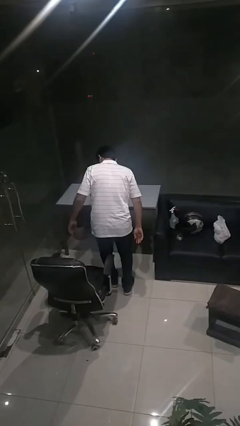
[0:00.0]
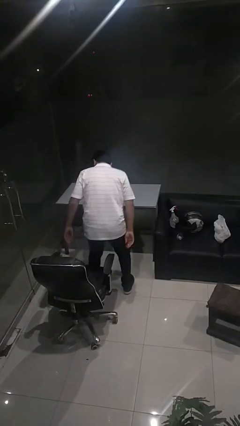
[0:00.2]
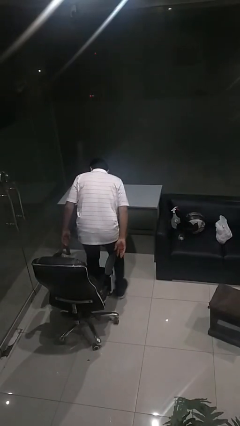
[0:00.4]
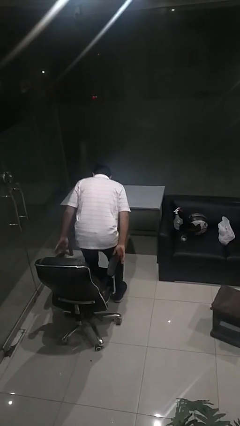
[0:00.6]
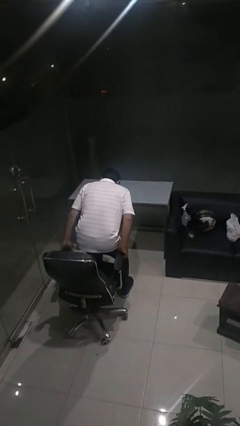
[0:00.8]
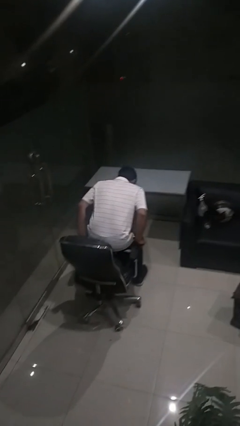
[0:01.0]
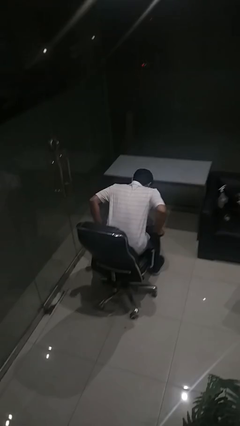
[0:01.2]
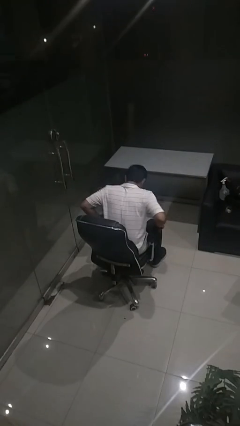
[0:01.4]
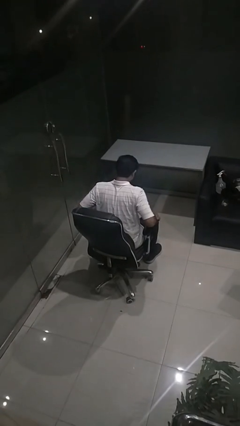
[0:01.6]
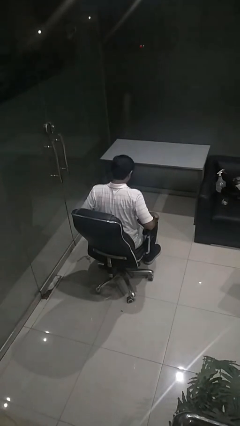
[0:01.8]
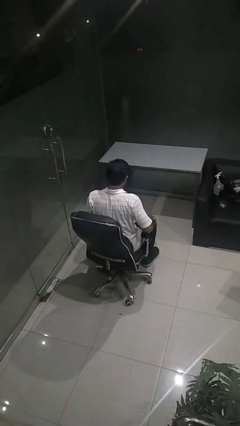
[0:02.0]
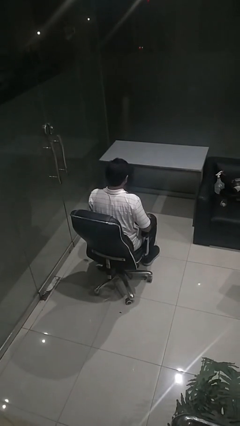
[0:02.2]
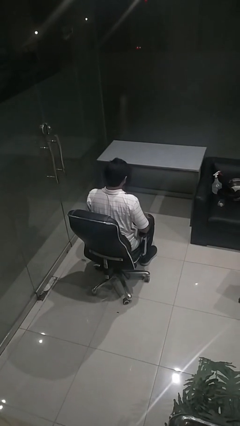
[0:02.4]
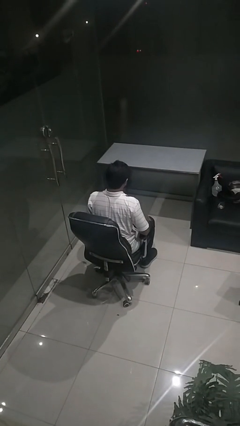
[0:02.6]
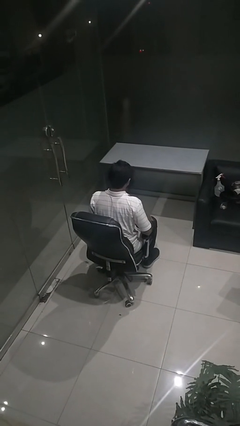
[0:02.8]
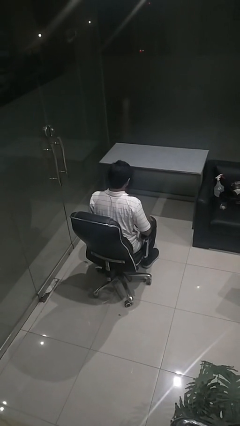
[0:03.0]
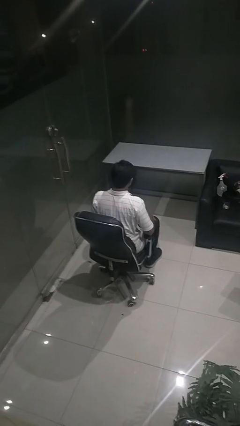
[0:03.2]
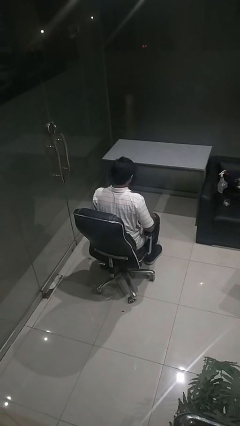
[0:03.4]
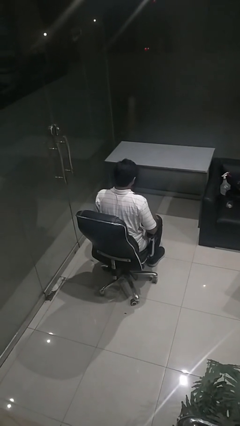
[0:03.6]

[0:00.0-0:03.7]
person sits down

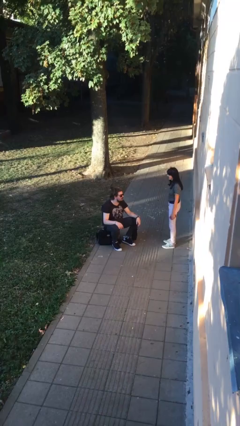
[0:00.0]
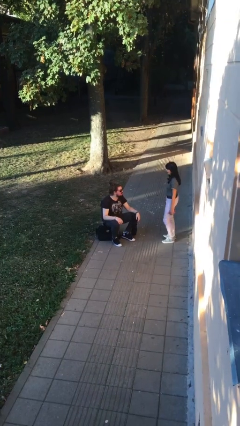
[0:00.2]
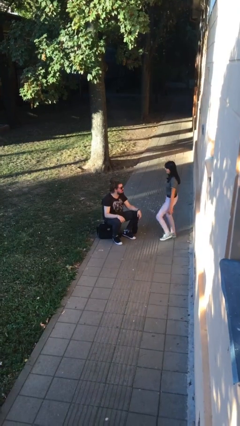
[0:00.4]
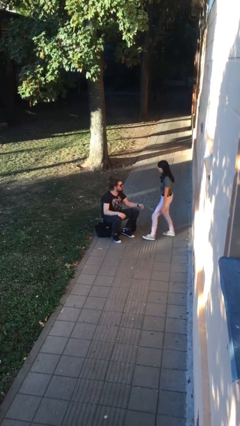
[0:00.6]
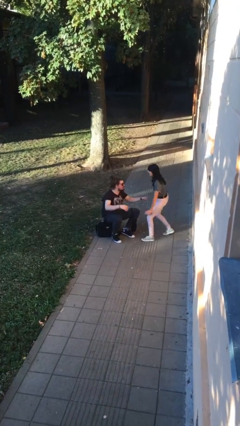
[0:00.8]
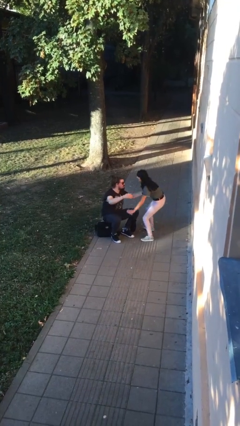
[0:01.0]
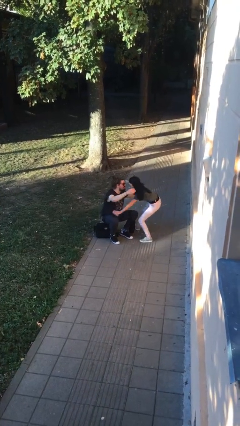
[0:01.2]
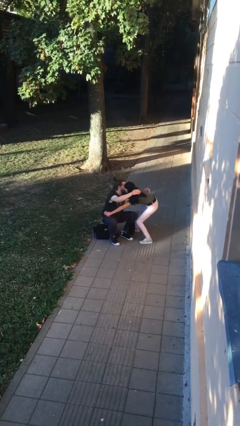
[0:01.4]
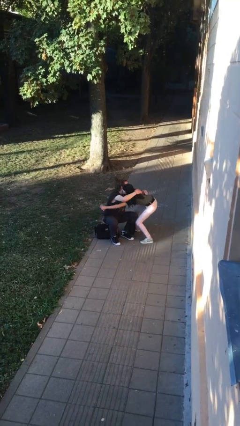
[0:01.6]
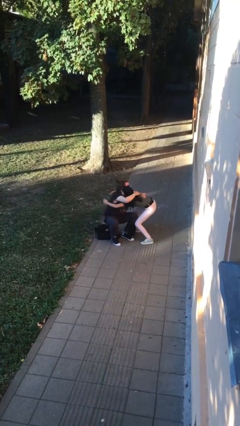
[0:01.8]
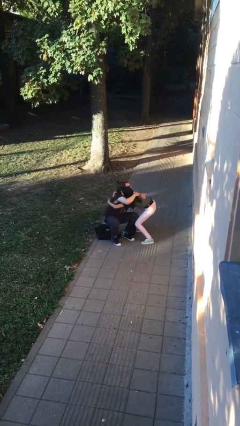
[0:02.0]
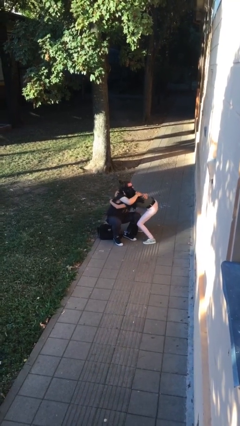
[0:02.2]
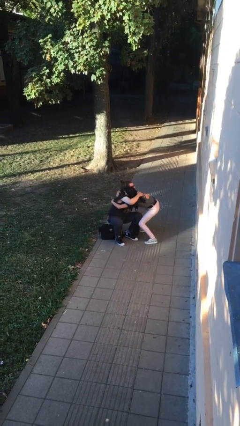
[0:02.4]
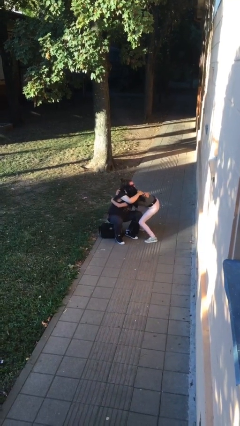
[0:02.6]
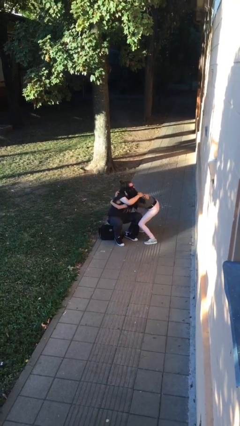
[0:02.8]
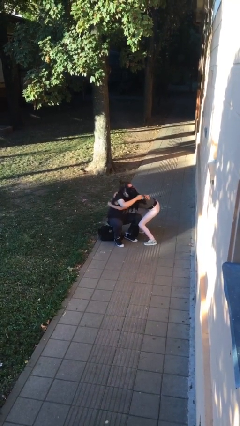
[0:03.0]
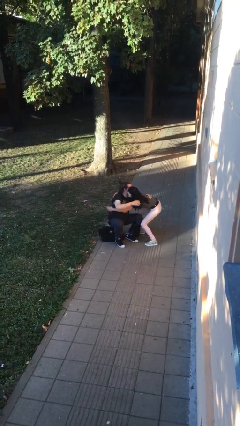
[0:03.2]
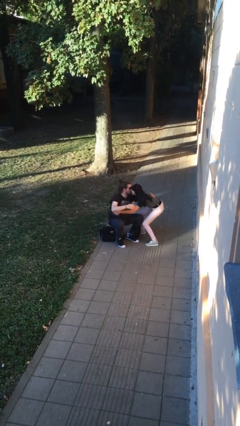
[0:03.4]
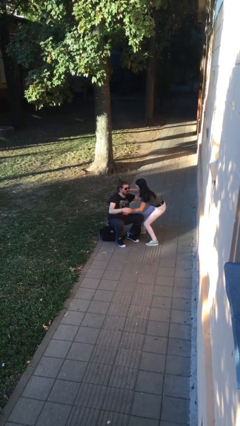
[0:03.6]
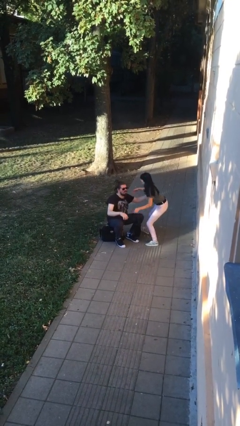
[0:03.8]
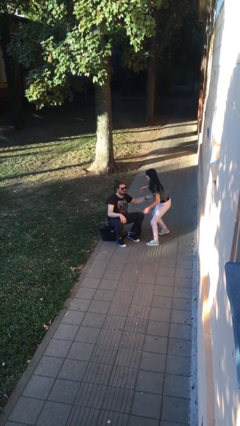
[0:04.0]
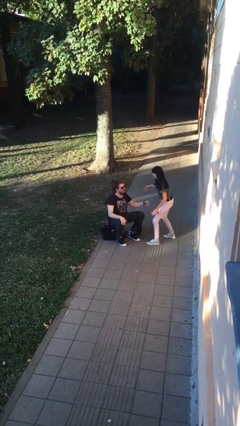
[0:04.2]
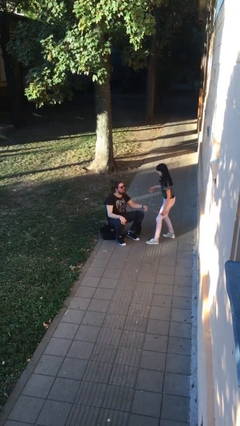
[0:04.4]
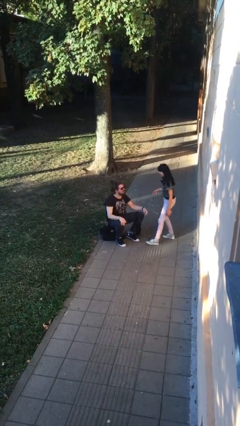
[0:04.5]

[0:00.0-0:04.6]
person embraces person

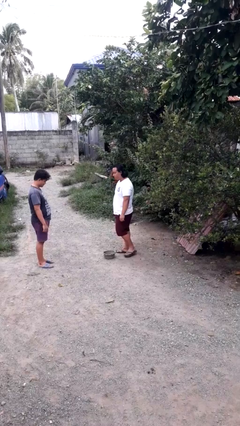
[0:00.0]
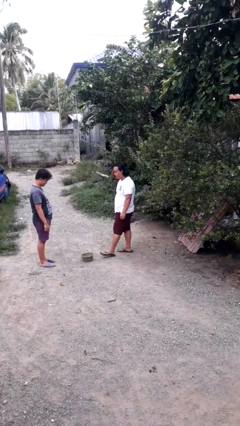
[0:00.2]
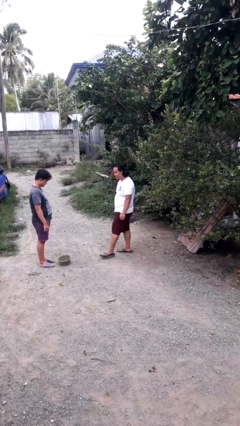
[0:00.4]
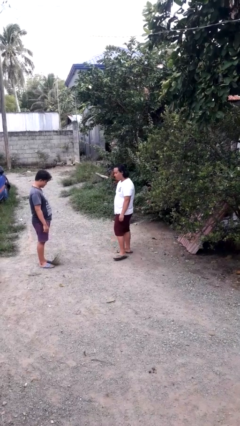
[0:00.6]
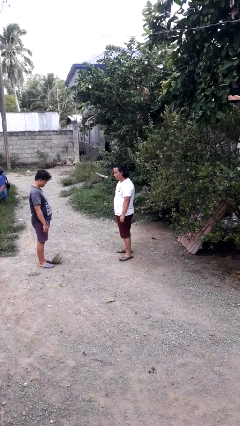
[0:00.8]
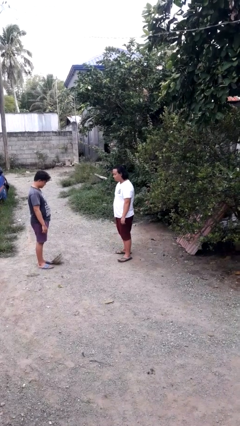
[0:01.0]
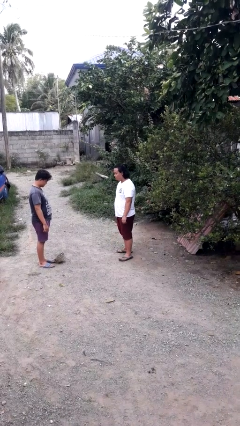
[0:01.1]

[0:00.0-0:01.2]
person kicks object to person

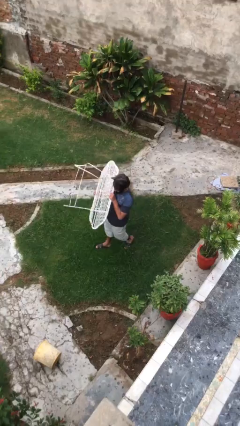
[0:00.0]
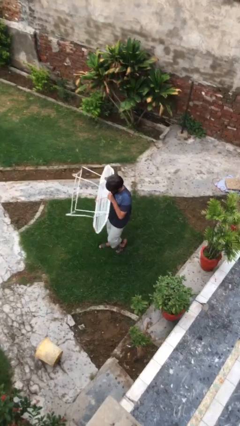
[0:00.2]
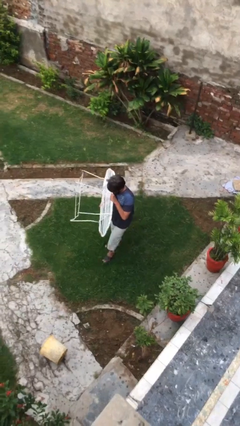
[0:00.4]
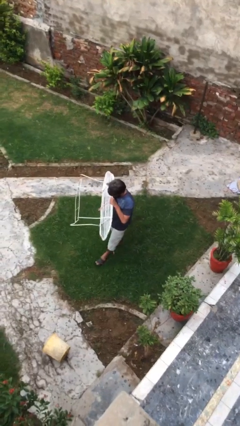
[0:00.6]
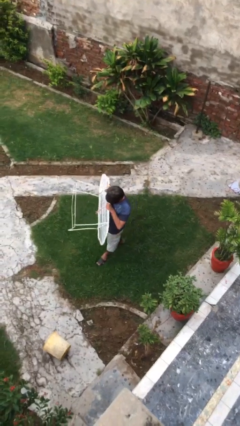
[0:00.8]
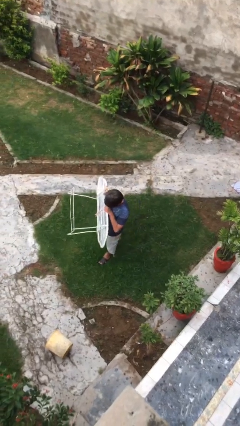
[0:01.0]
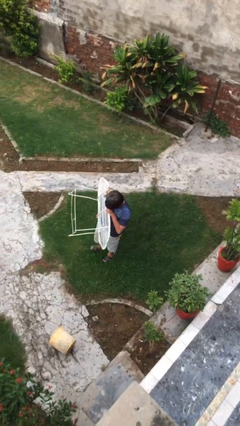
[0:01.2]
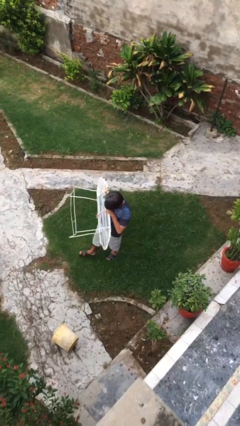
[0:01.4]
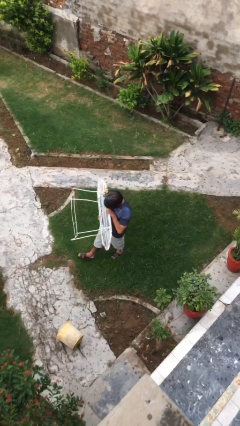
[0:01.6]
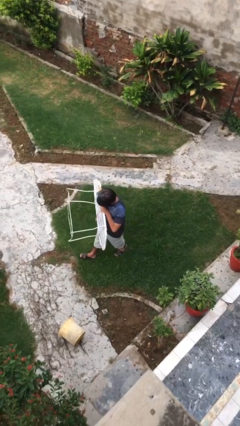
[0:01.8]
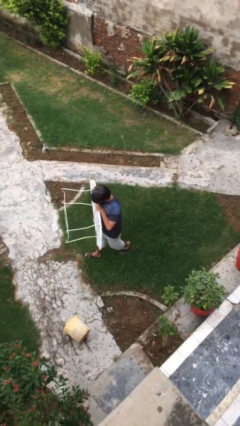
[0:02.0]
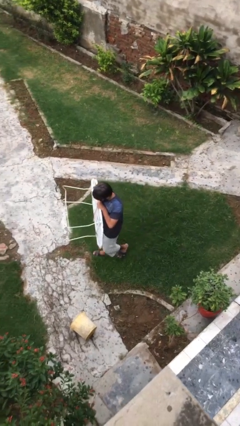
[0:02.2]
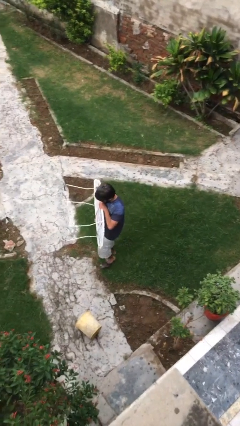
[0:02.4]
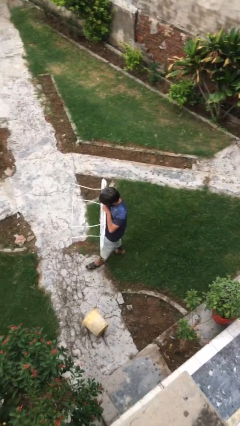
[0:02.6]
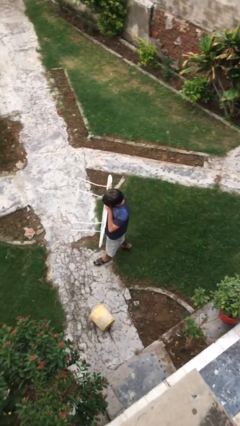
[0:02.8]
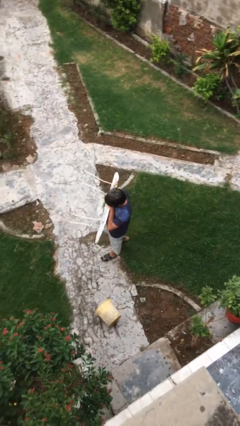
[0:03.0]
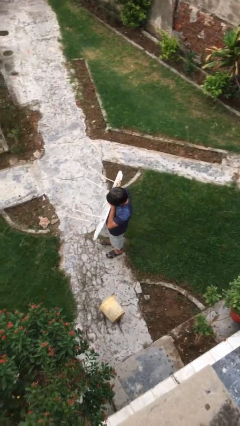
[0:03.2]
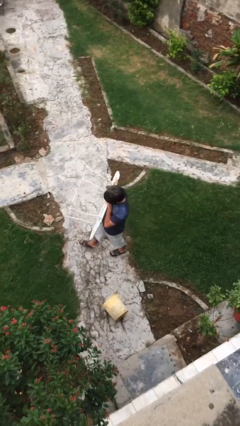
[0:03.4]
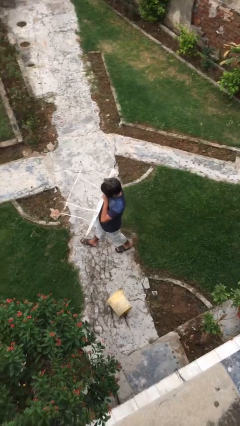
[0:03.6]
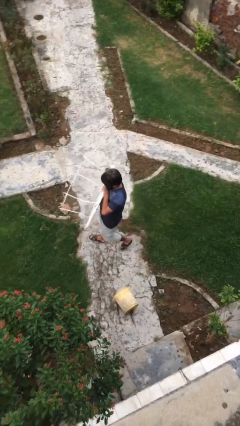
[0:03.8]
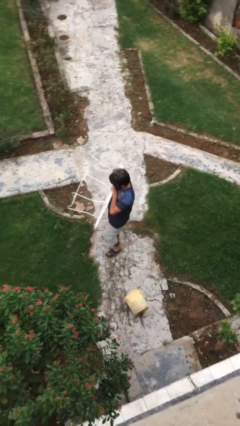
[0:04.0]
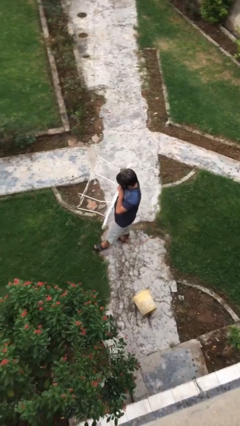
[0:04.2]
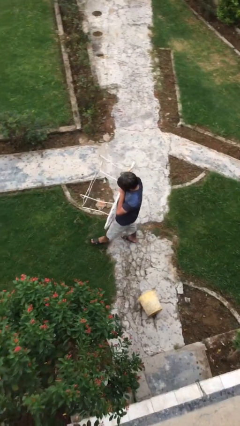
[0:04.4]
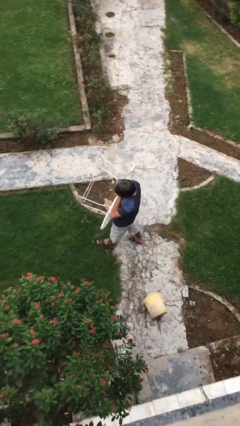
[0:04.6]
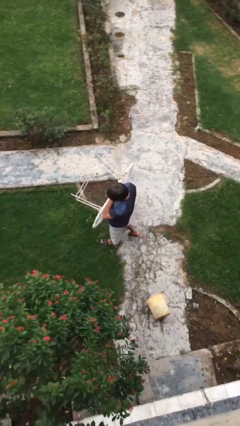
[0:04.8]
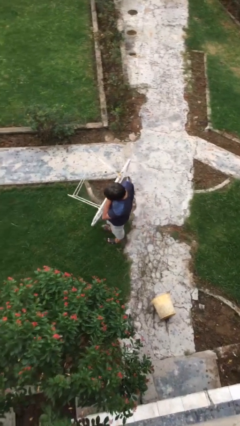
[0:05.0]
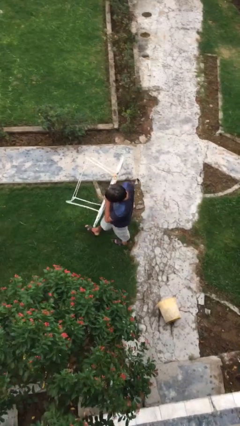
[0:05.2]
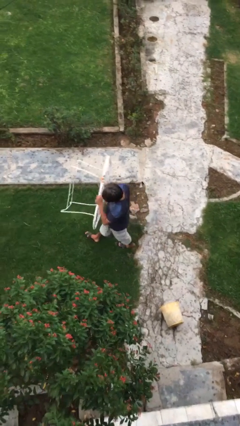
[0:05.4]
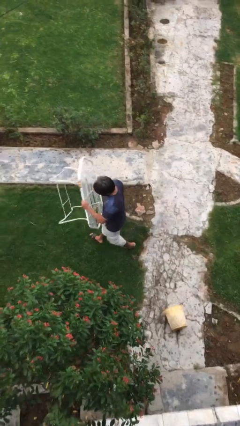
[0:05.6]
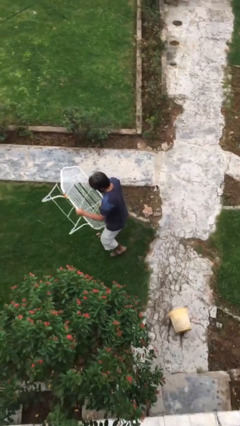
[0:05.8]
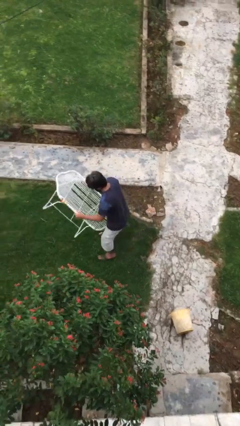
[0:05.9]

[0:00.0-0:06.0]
person carries heavy object

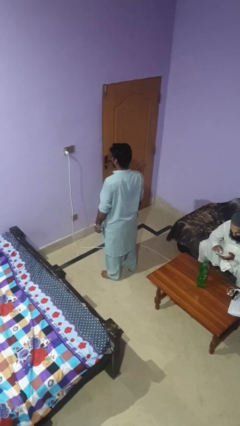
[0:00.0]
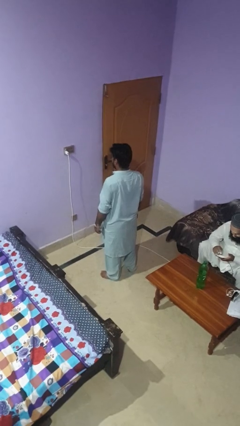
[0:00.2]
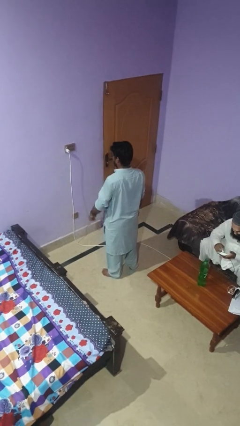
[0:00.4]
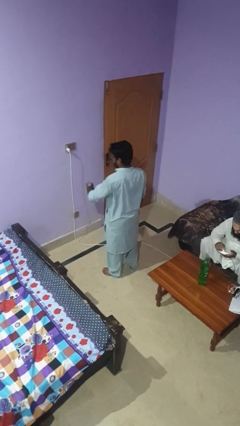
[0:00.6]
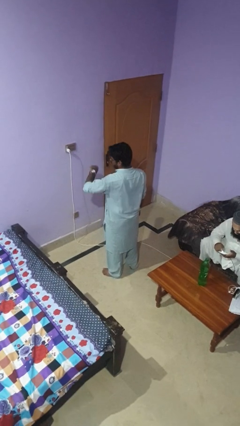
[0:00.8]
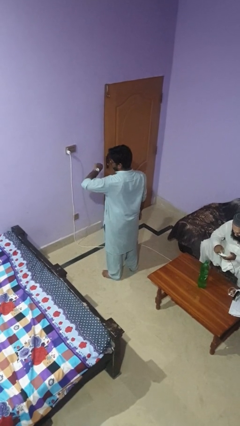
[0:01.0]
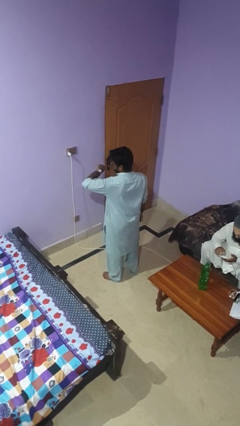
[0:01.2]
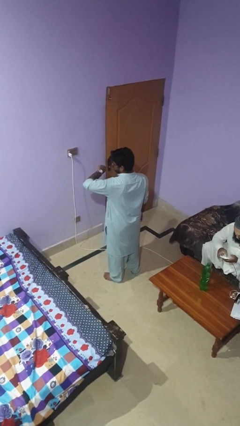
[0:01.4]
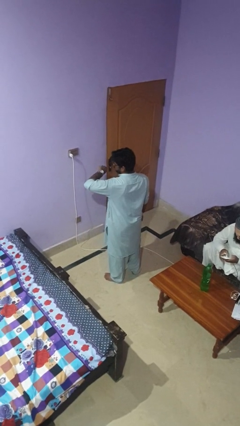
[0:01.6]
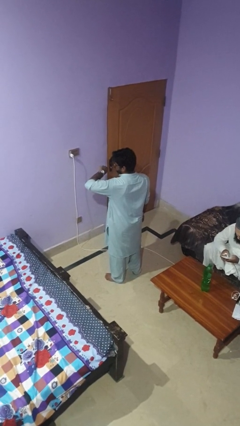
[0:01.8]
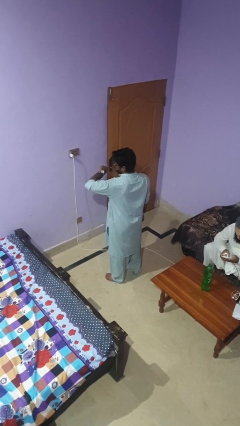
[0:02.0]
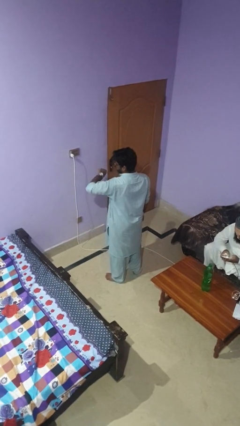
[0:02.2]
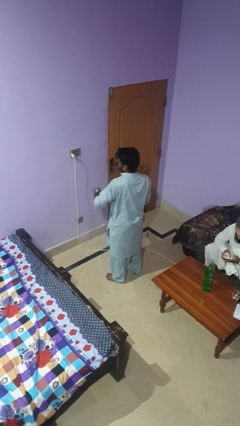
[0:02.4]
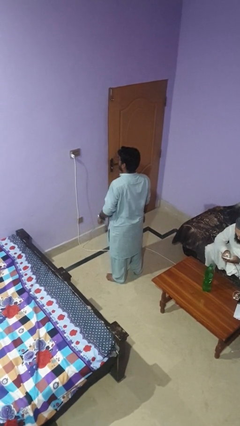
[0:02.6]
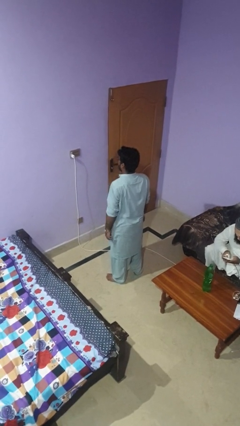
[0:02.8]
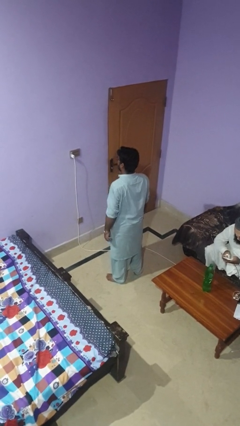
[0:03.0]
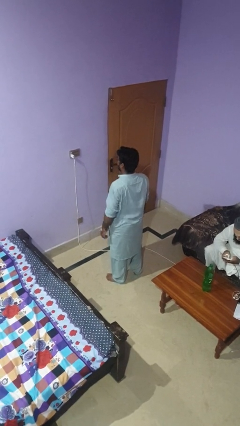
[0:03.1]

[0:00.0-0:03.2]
person looks at wristwatch
